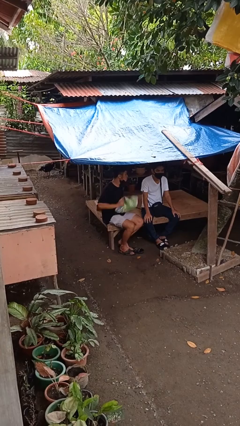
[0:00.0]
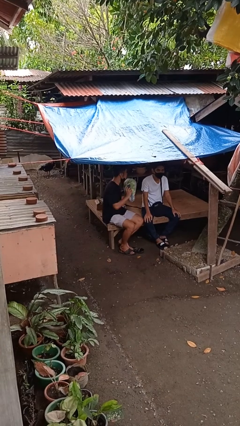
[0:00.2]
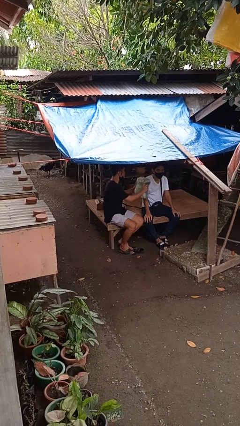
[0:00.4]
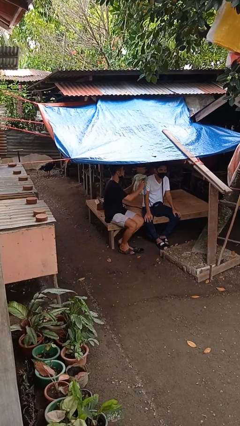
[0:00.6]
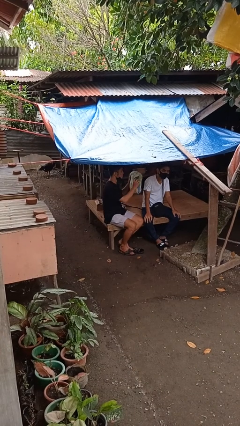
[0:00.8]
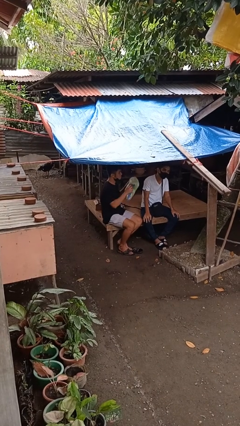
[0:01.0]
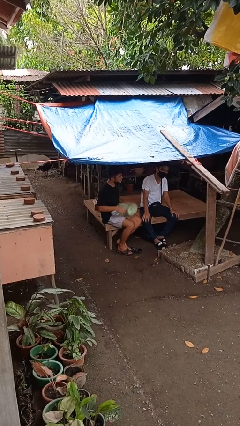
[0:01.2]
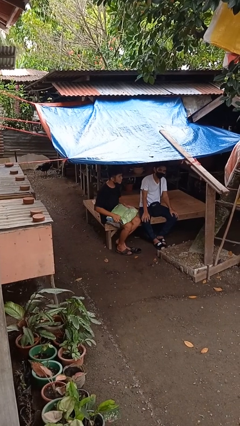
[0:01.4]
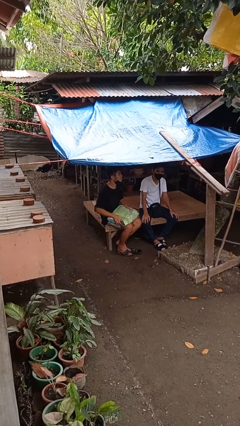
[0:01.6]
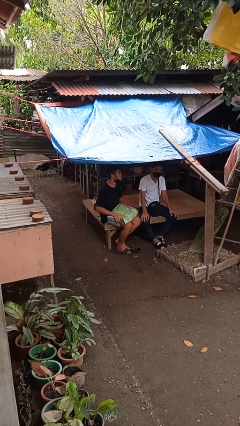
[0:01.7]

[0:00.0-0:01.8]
person hits person with pillow

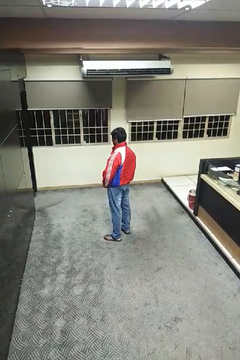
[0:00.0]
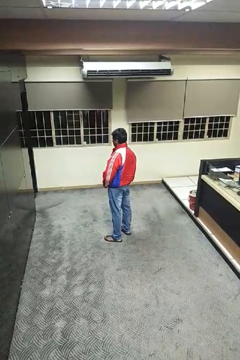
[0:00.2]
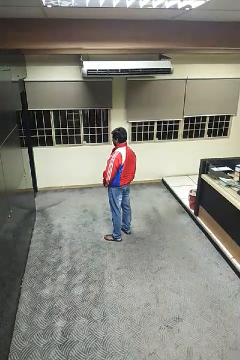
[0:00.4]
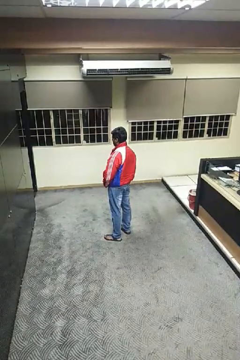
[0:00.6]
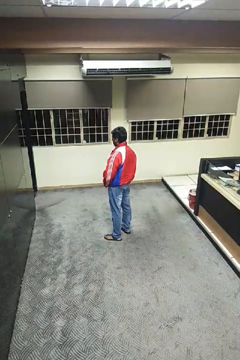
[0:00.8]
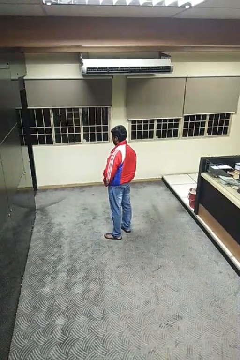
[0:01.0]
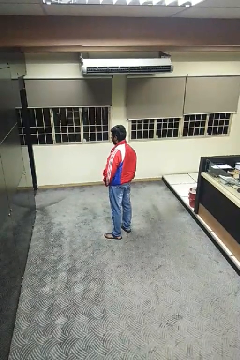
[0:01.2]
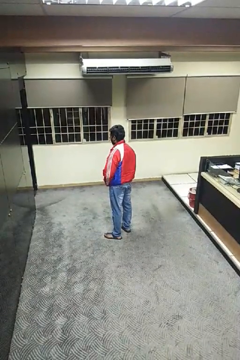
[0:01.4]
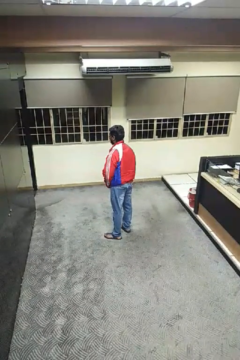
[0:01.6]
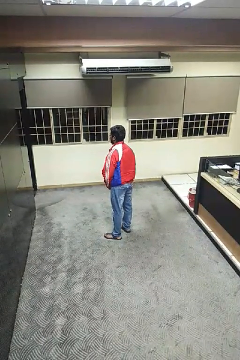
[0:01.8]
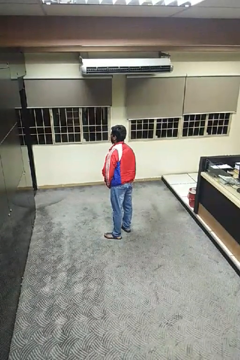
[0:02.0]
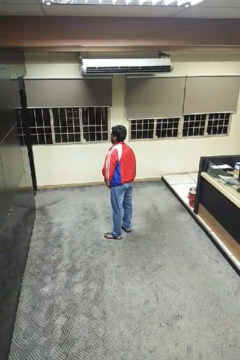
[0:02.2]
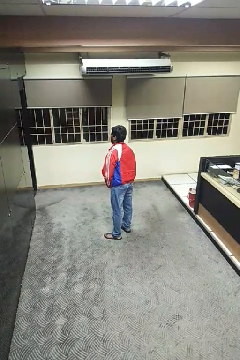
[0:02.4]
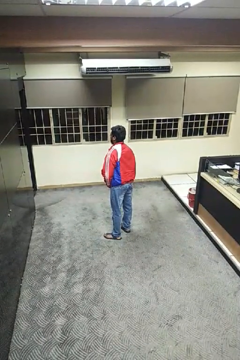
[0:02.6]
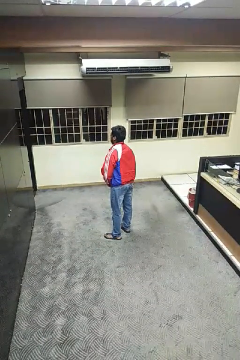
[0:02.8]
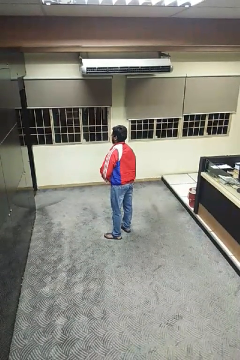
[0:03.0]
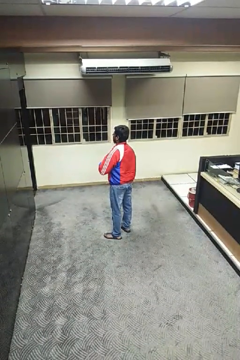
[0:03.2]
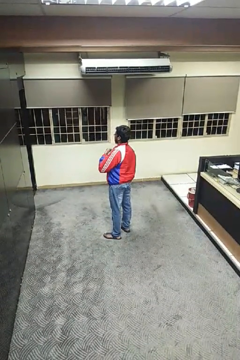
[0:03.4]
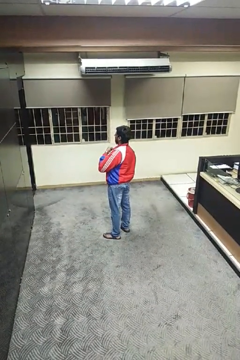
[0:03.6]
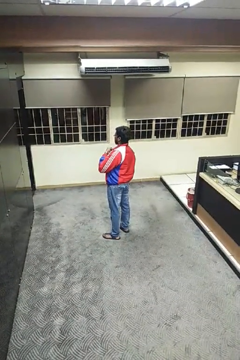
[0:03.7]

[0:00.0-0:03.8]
person zips up jacket

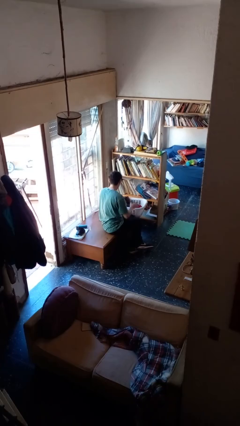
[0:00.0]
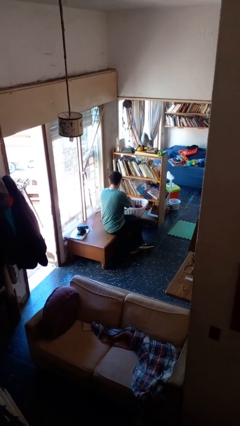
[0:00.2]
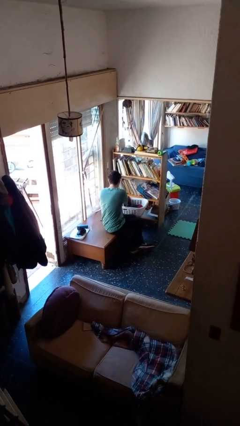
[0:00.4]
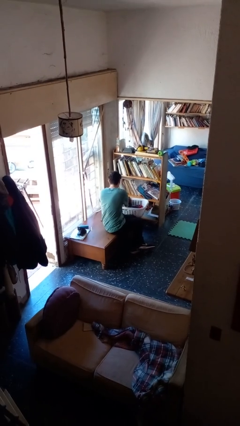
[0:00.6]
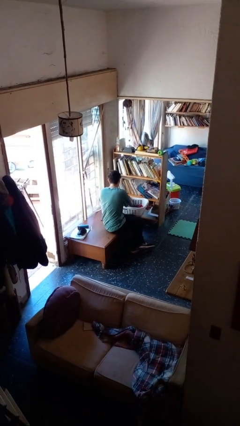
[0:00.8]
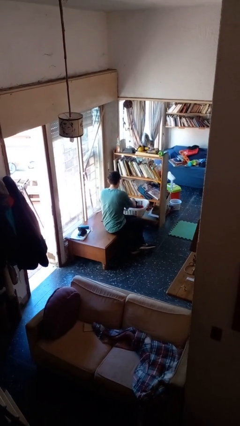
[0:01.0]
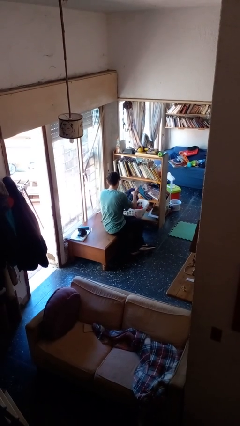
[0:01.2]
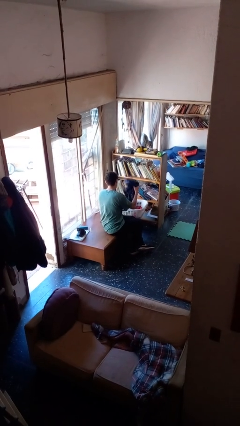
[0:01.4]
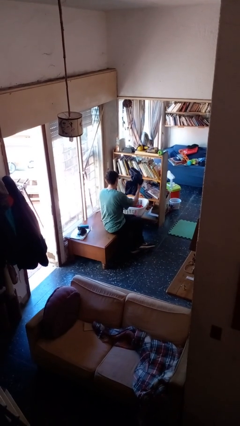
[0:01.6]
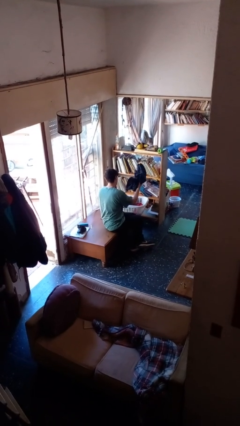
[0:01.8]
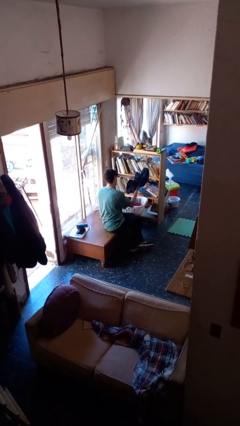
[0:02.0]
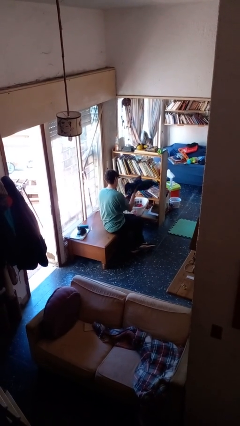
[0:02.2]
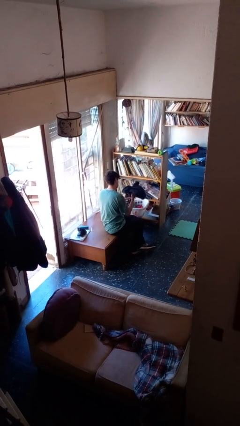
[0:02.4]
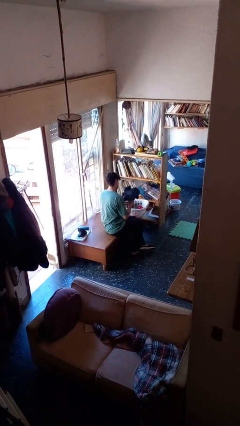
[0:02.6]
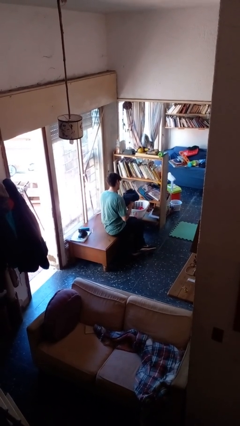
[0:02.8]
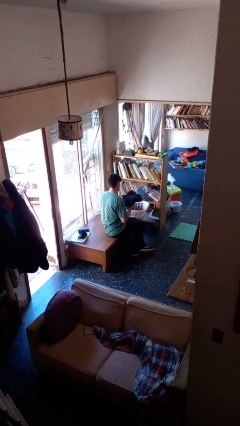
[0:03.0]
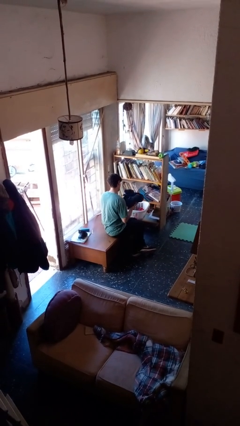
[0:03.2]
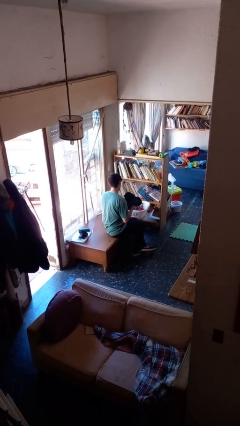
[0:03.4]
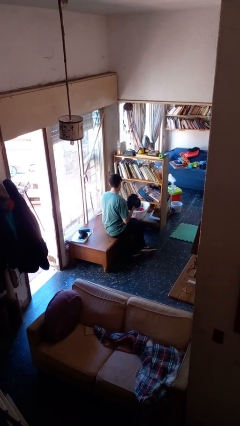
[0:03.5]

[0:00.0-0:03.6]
person takes object from basket

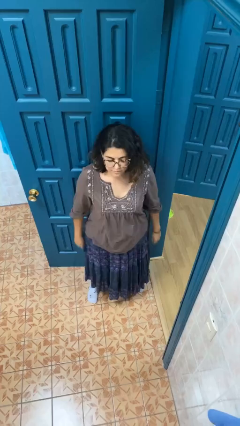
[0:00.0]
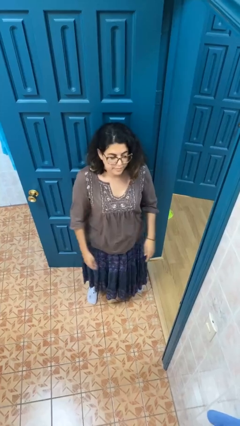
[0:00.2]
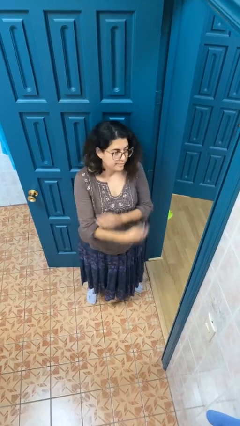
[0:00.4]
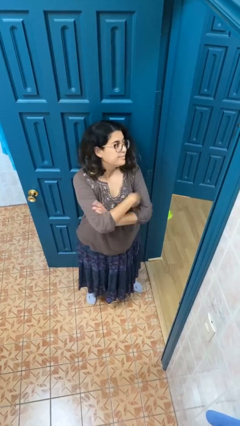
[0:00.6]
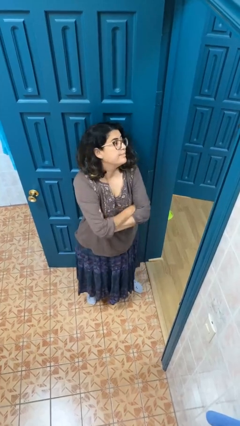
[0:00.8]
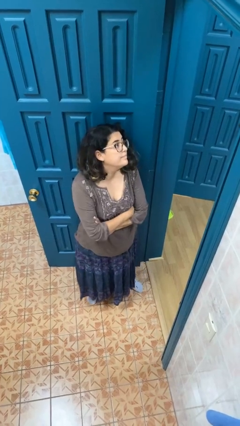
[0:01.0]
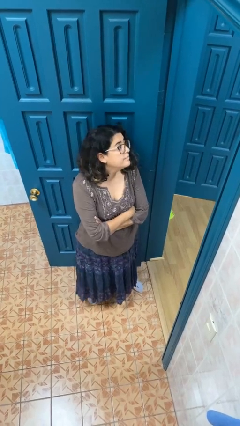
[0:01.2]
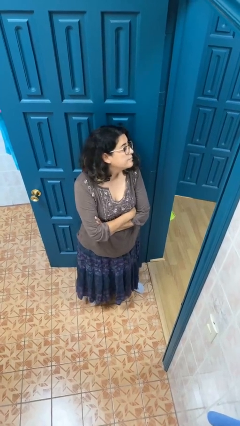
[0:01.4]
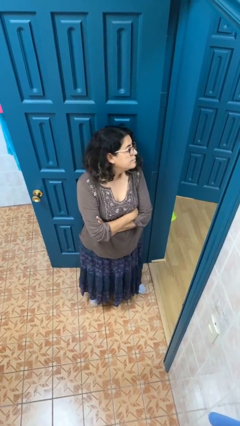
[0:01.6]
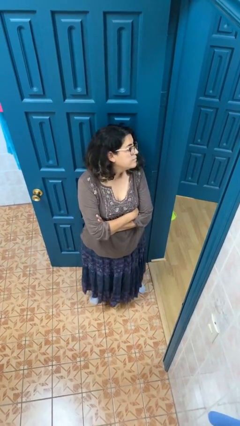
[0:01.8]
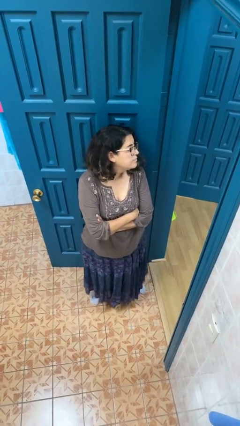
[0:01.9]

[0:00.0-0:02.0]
person crosses arms

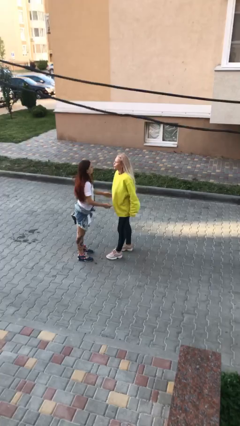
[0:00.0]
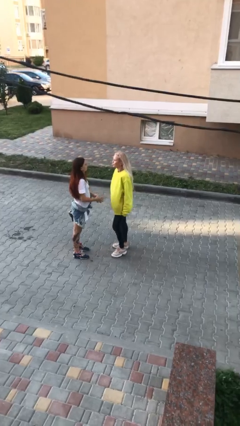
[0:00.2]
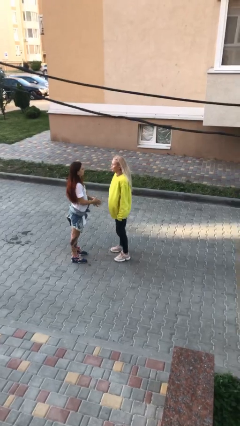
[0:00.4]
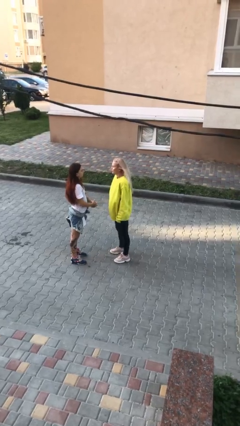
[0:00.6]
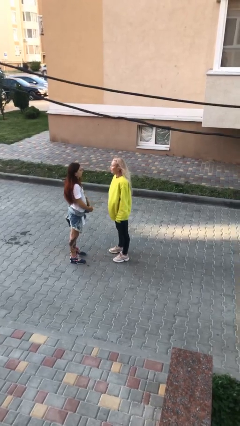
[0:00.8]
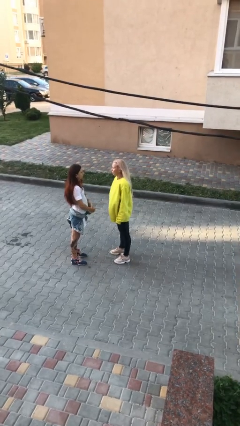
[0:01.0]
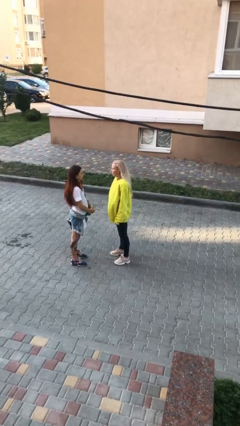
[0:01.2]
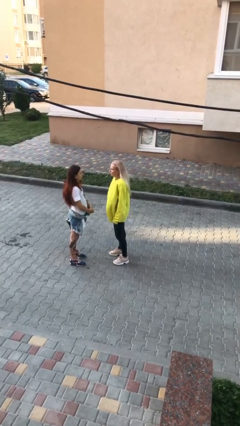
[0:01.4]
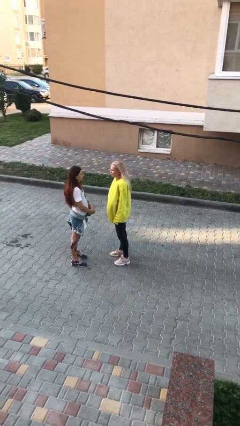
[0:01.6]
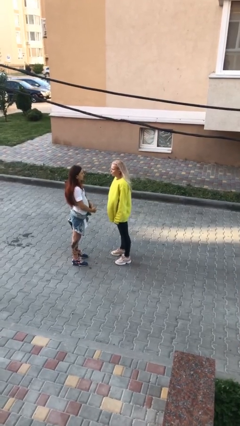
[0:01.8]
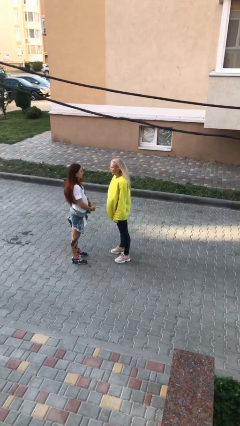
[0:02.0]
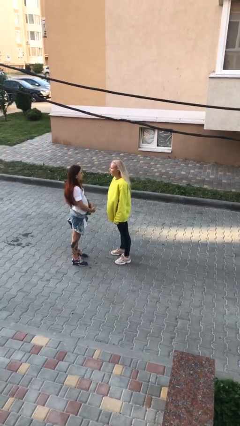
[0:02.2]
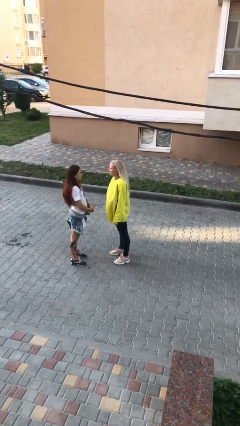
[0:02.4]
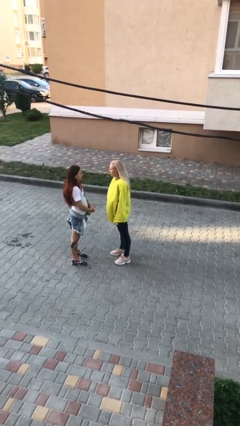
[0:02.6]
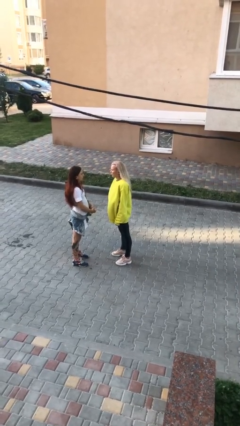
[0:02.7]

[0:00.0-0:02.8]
person talks to person

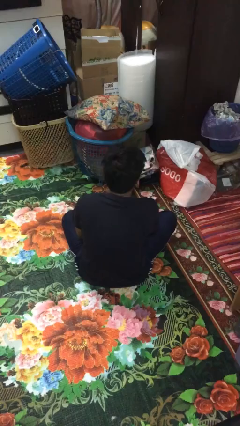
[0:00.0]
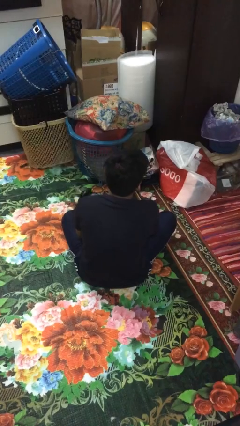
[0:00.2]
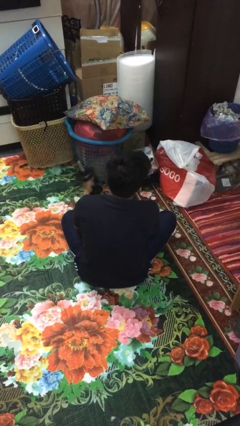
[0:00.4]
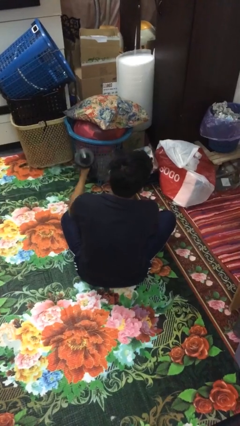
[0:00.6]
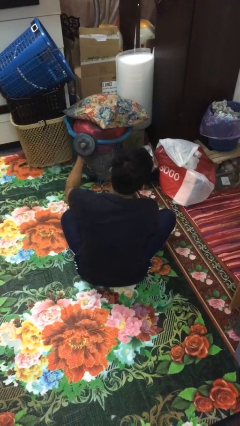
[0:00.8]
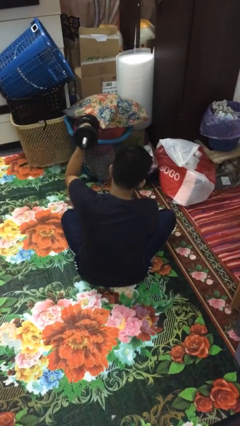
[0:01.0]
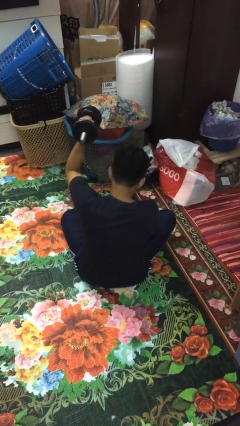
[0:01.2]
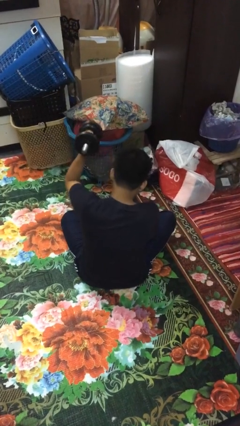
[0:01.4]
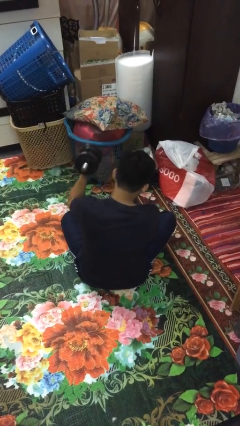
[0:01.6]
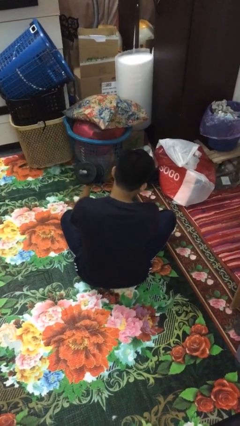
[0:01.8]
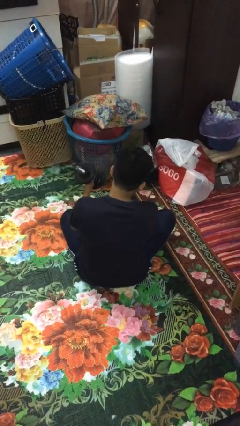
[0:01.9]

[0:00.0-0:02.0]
person lifts dumbbells

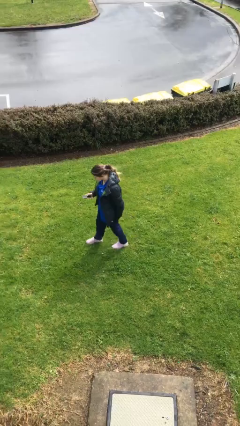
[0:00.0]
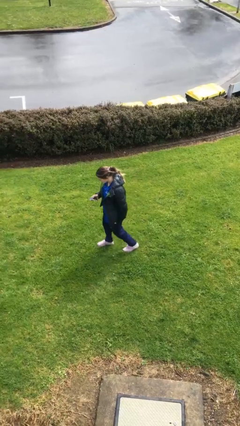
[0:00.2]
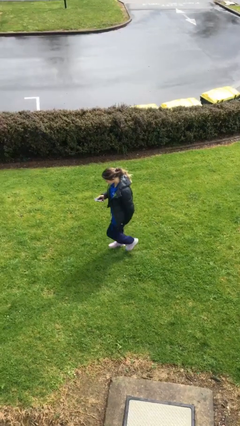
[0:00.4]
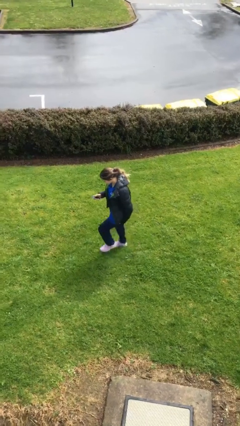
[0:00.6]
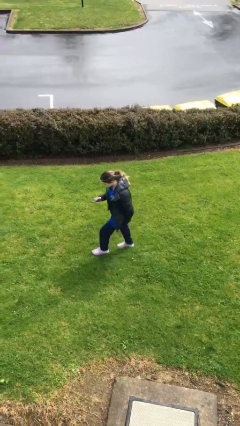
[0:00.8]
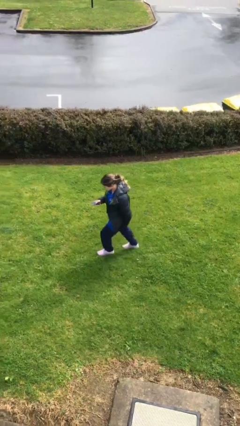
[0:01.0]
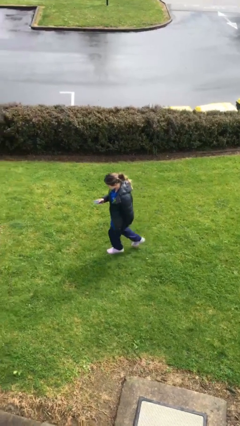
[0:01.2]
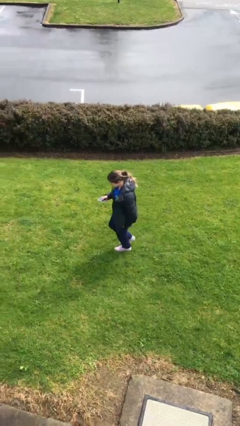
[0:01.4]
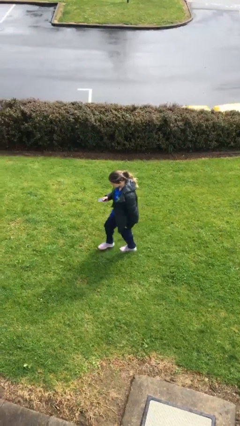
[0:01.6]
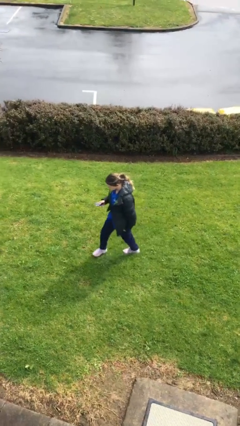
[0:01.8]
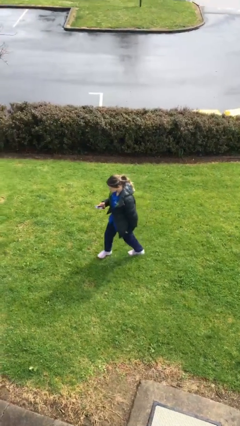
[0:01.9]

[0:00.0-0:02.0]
person texts on phone
